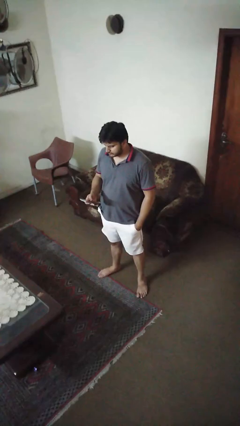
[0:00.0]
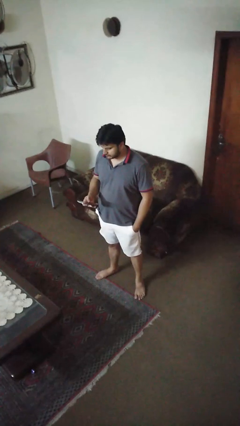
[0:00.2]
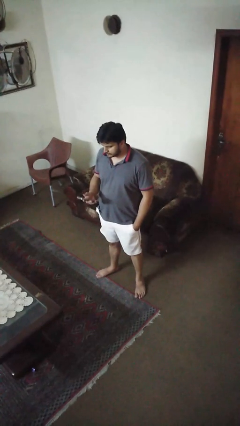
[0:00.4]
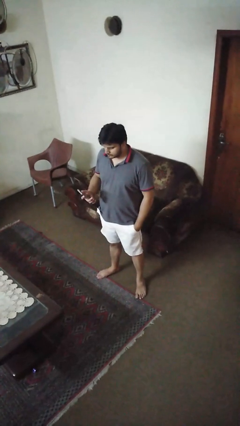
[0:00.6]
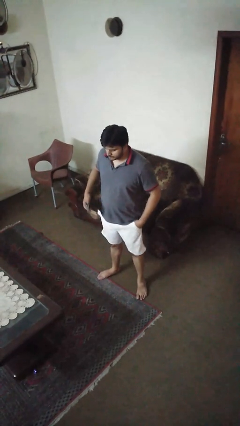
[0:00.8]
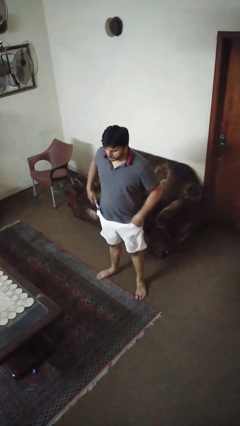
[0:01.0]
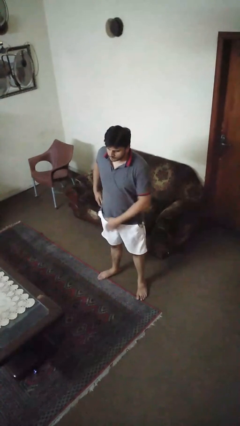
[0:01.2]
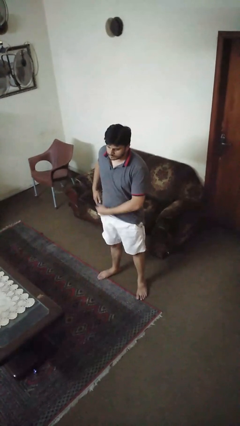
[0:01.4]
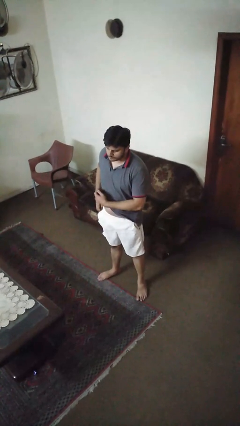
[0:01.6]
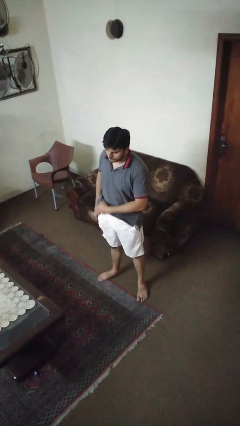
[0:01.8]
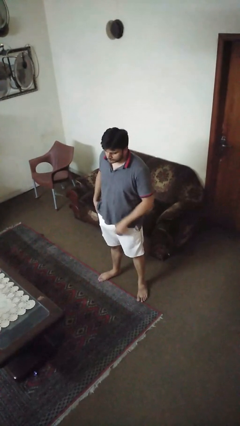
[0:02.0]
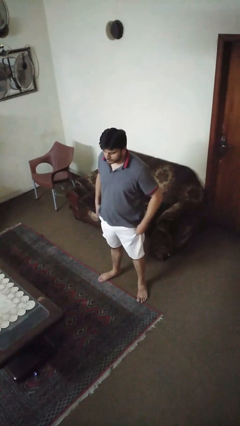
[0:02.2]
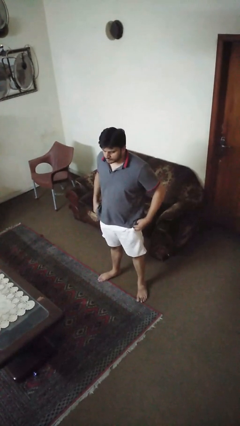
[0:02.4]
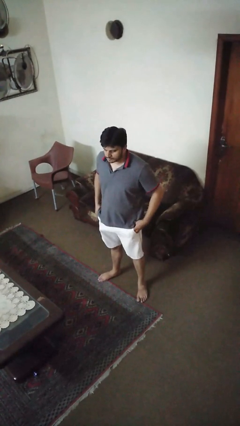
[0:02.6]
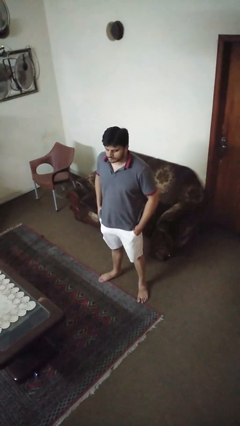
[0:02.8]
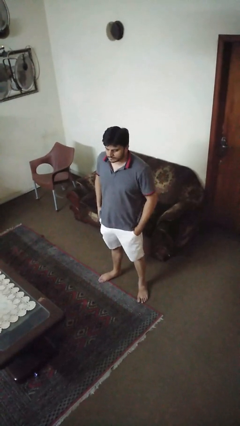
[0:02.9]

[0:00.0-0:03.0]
person puts phone into pocket

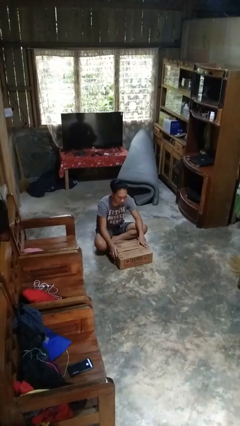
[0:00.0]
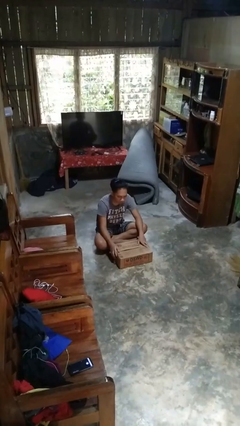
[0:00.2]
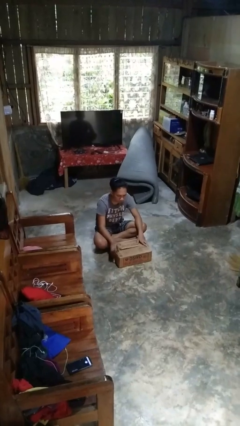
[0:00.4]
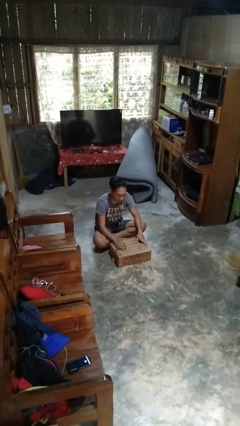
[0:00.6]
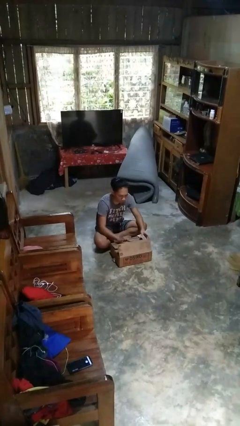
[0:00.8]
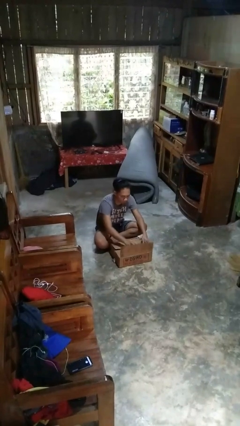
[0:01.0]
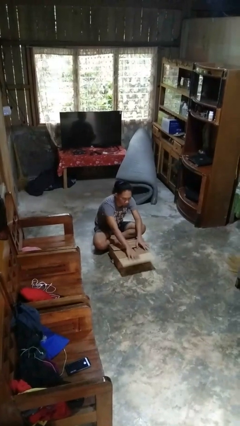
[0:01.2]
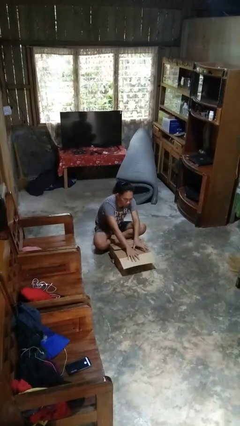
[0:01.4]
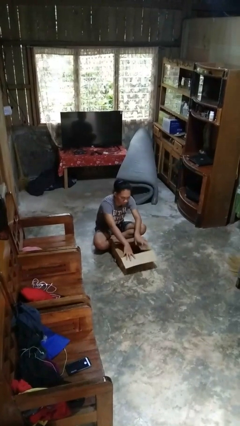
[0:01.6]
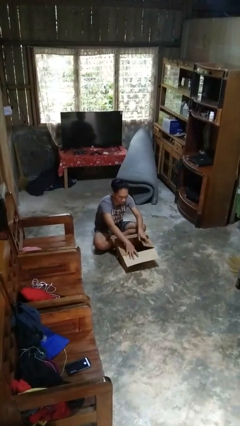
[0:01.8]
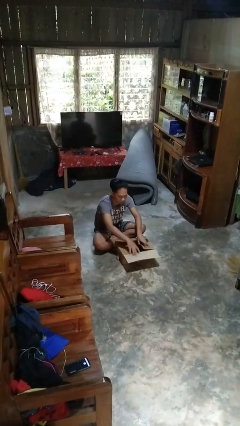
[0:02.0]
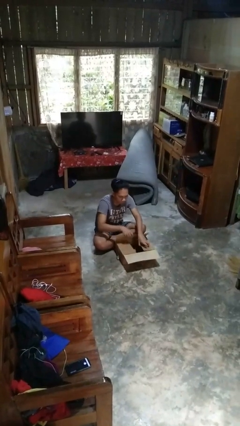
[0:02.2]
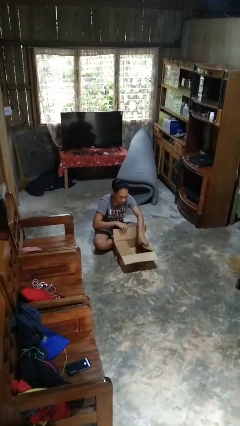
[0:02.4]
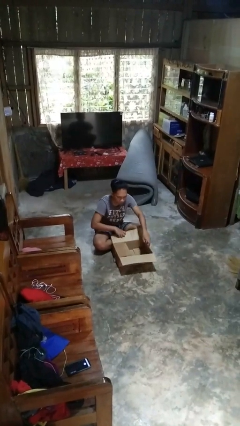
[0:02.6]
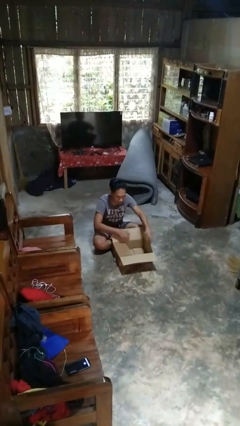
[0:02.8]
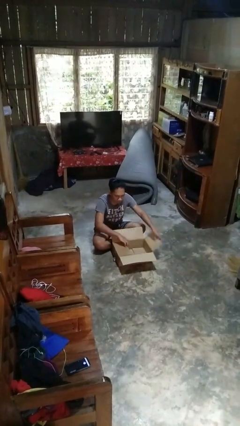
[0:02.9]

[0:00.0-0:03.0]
person opens box

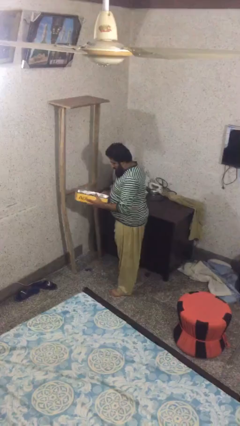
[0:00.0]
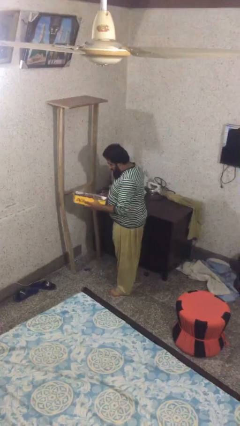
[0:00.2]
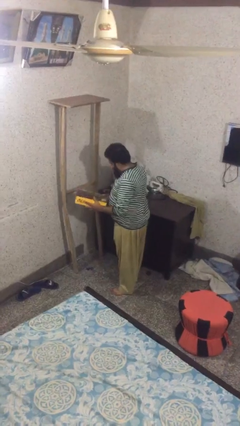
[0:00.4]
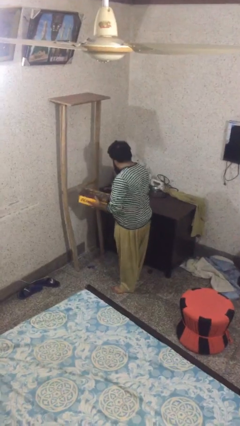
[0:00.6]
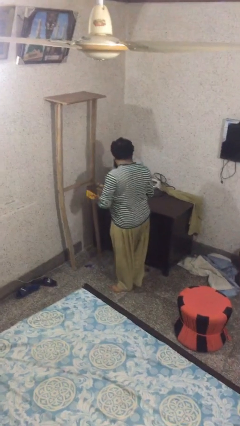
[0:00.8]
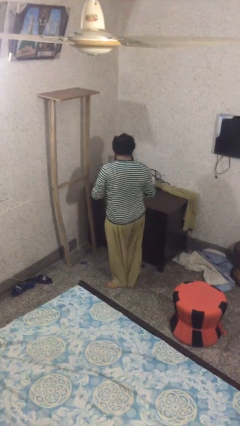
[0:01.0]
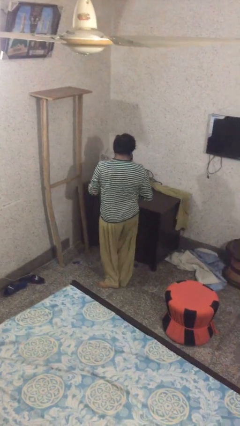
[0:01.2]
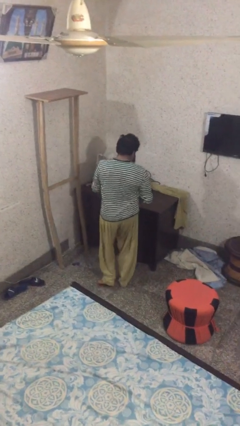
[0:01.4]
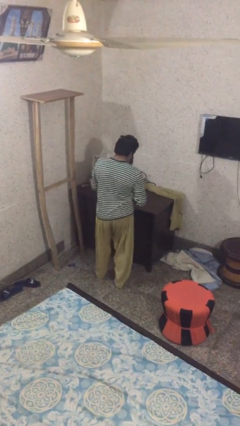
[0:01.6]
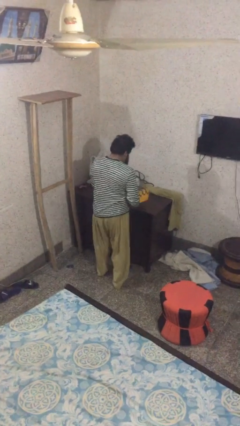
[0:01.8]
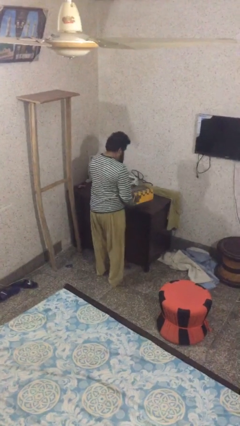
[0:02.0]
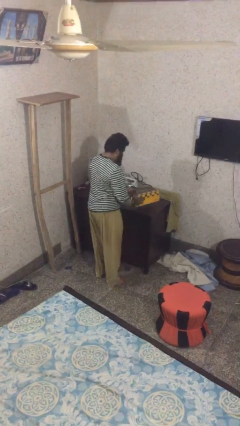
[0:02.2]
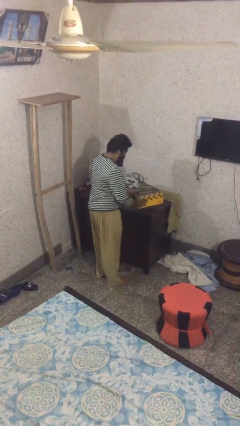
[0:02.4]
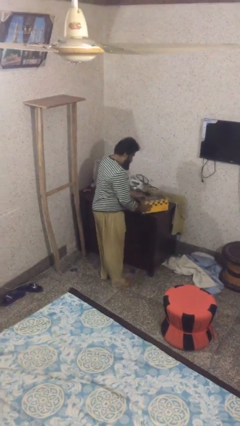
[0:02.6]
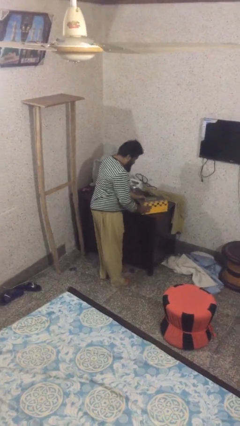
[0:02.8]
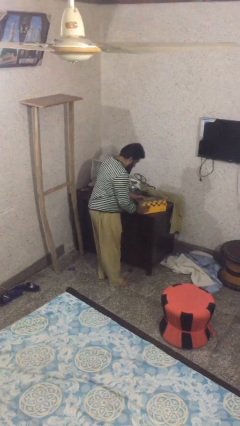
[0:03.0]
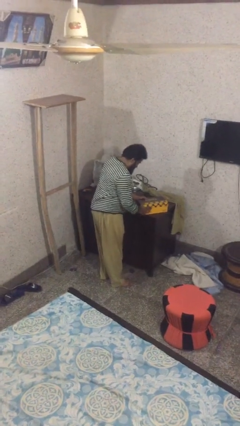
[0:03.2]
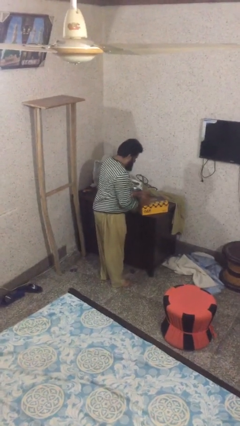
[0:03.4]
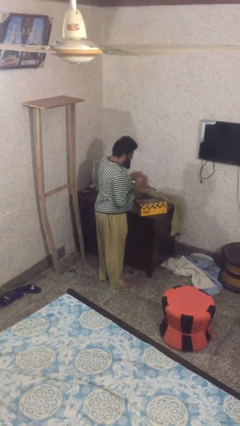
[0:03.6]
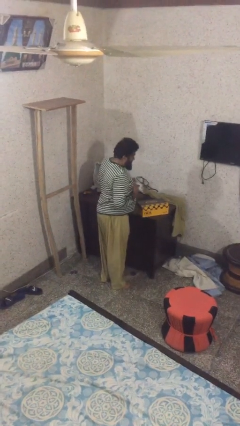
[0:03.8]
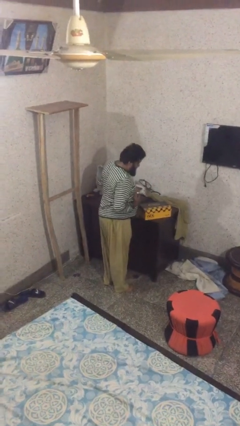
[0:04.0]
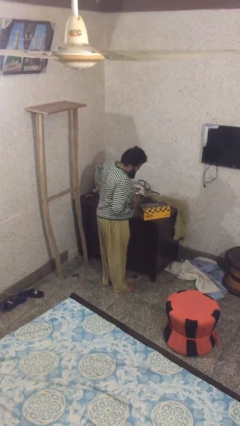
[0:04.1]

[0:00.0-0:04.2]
person puts down object on table

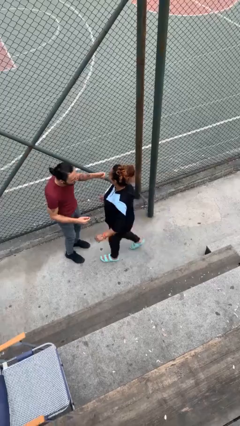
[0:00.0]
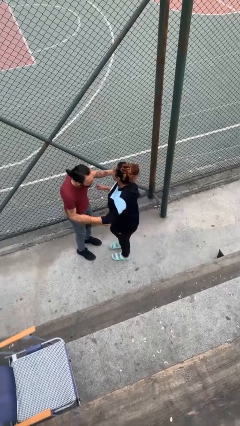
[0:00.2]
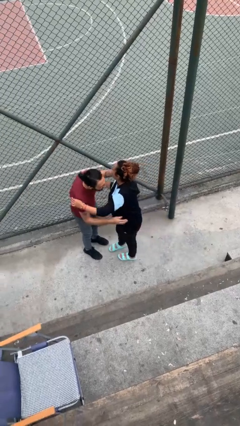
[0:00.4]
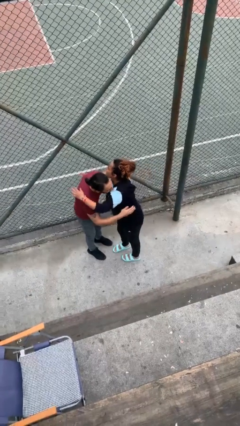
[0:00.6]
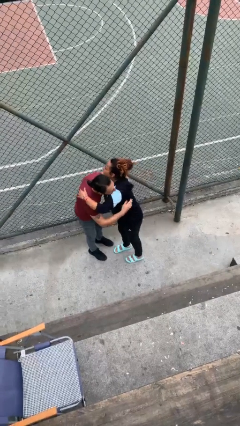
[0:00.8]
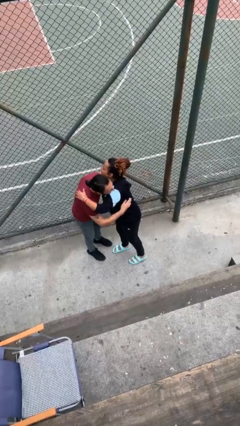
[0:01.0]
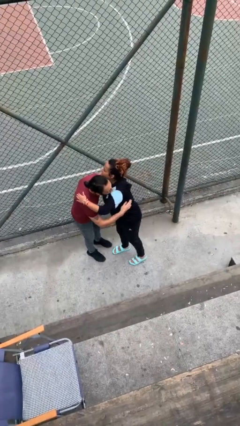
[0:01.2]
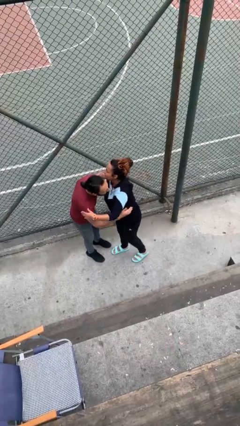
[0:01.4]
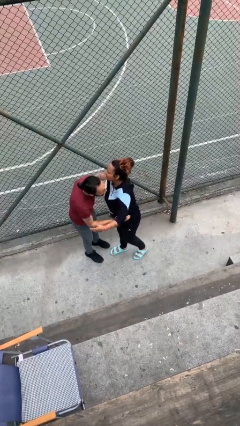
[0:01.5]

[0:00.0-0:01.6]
person embraces person

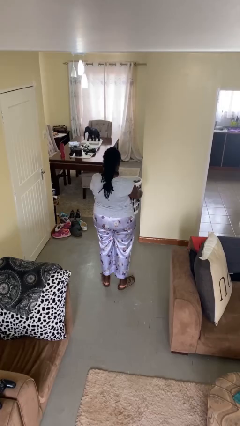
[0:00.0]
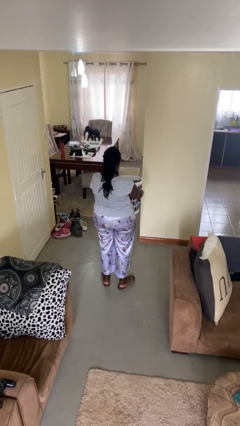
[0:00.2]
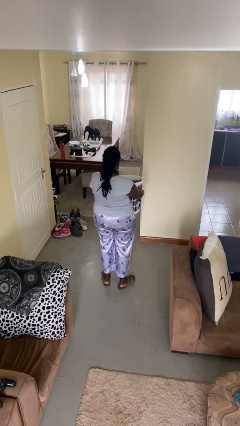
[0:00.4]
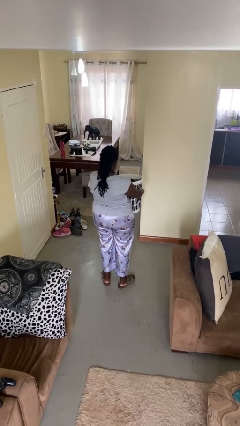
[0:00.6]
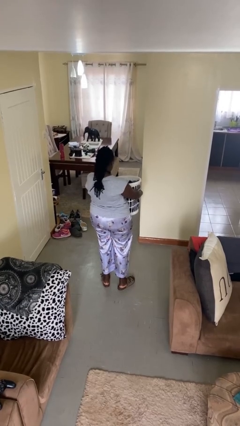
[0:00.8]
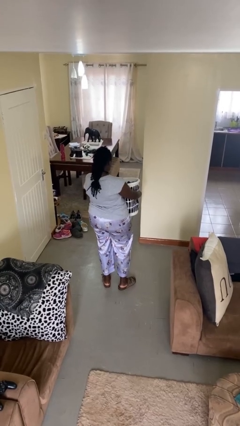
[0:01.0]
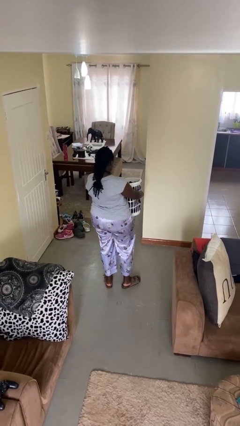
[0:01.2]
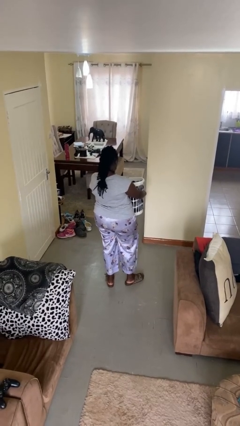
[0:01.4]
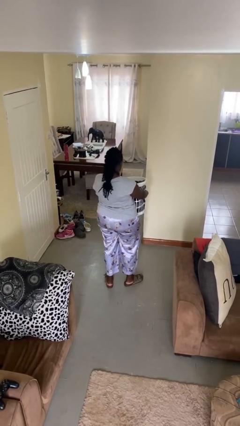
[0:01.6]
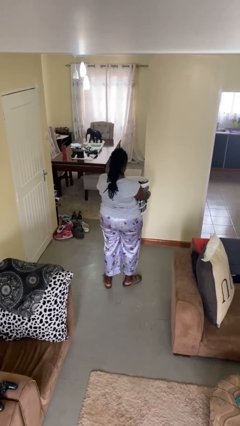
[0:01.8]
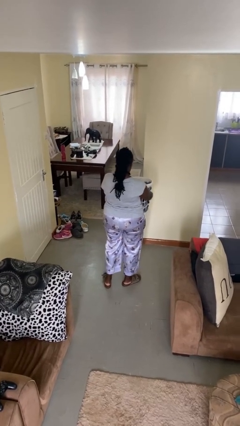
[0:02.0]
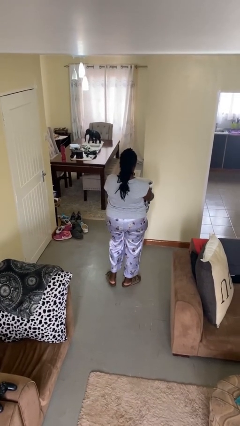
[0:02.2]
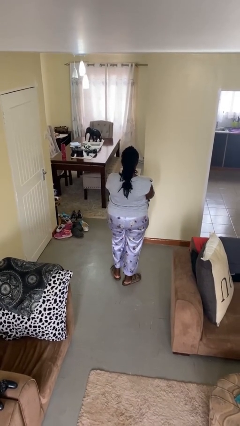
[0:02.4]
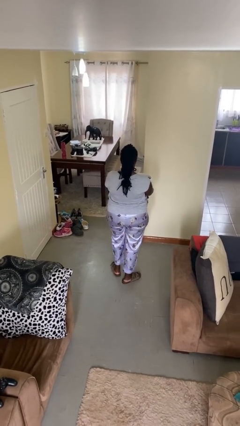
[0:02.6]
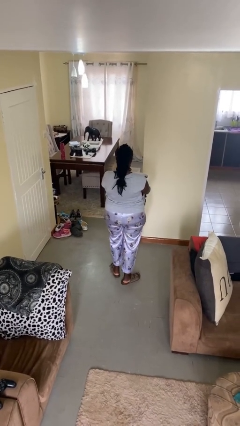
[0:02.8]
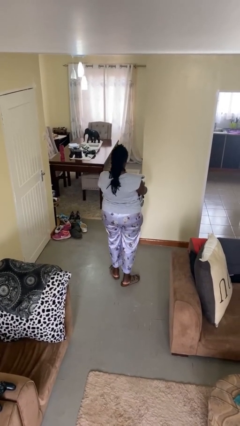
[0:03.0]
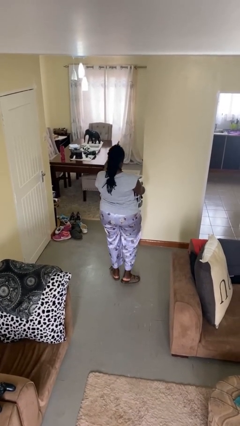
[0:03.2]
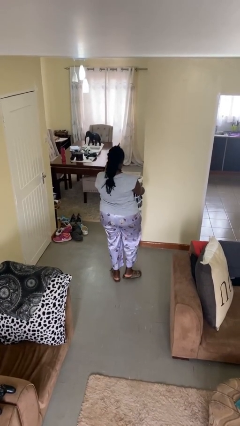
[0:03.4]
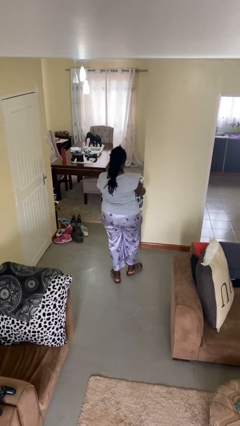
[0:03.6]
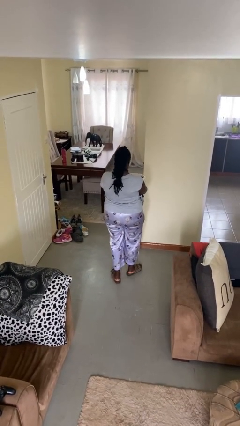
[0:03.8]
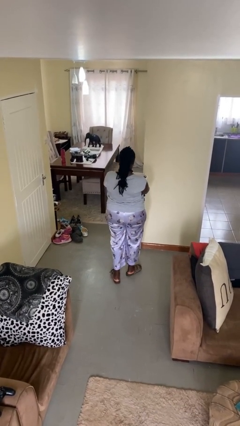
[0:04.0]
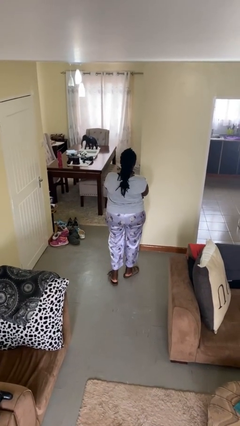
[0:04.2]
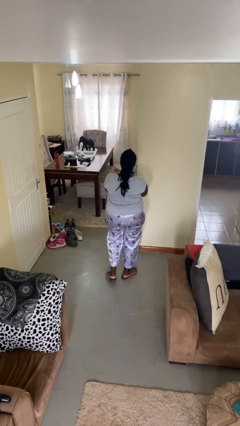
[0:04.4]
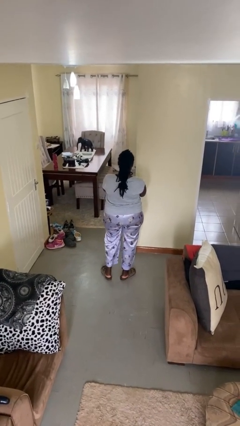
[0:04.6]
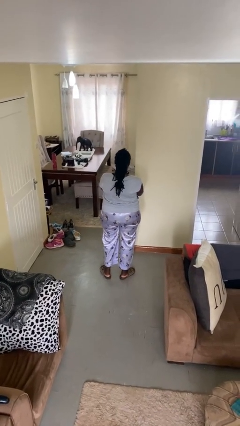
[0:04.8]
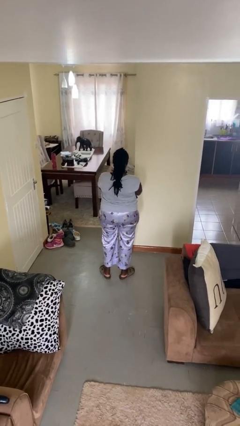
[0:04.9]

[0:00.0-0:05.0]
person carries laundry basket

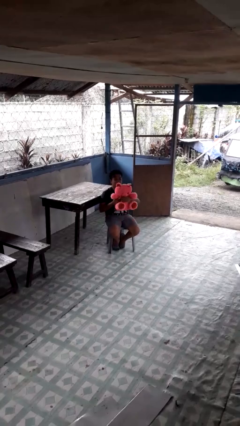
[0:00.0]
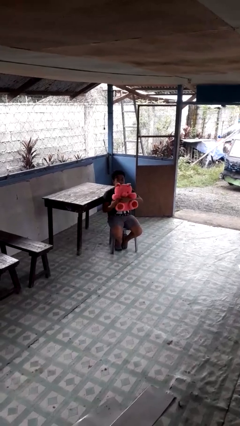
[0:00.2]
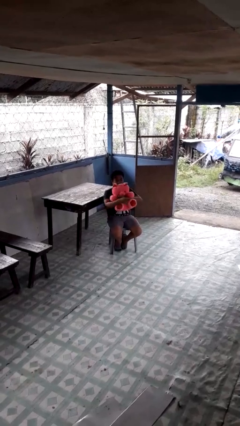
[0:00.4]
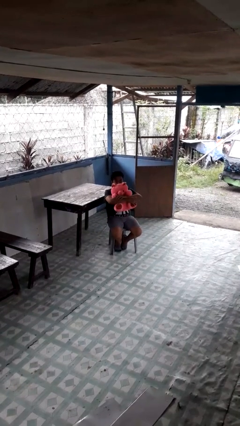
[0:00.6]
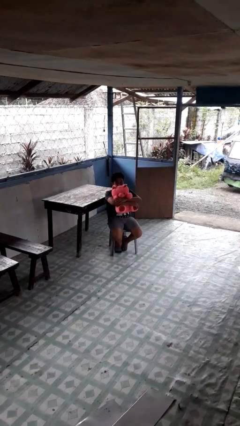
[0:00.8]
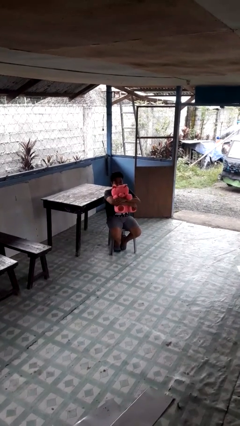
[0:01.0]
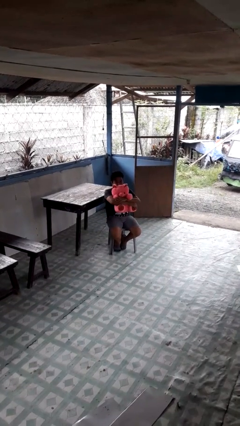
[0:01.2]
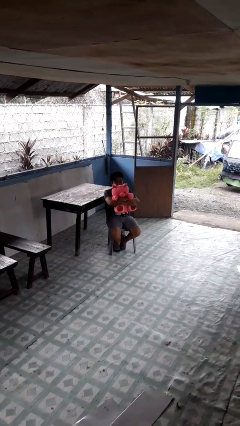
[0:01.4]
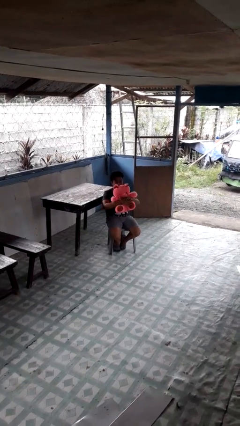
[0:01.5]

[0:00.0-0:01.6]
person hugs stuffed animal
